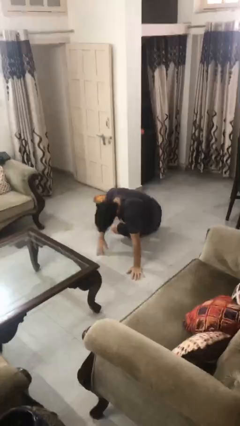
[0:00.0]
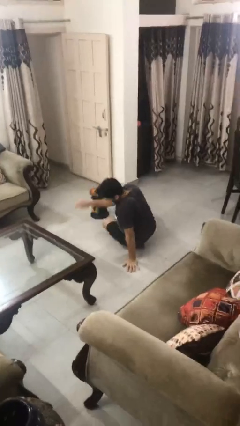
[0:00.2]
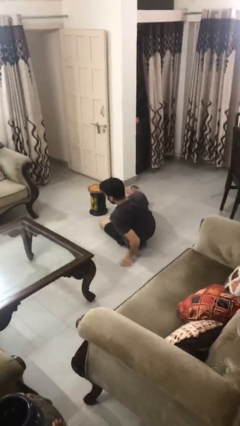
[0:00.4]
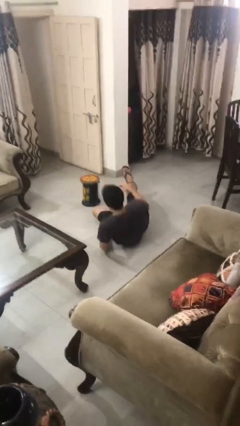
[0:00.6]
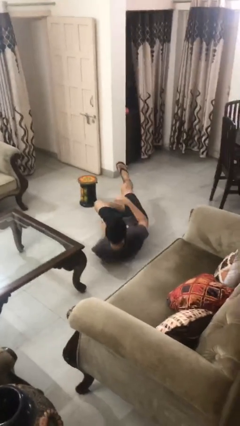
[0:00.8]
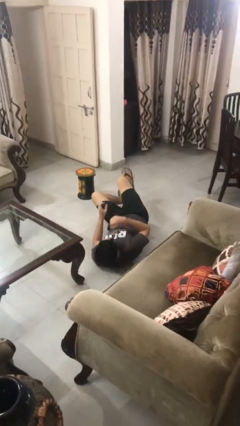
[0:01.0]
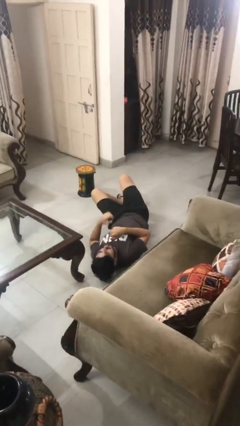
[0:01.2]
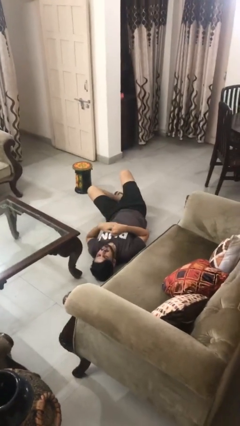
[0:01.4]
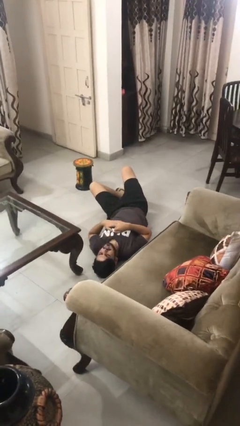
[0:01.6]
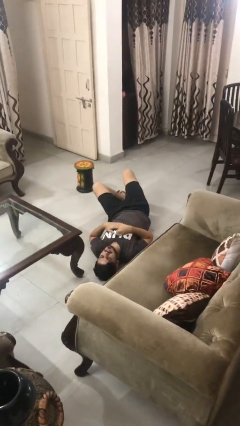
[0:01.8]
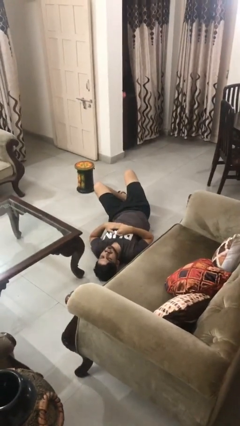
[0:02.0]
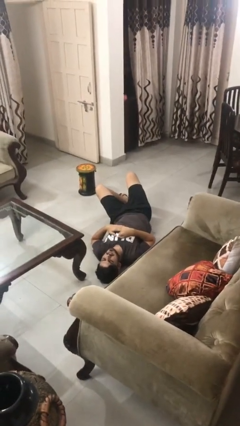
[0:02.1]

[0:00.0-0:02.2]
person lies down on floor

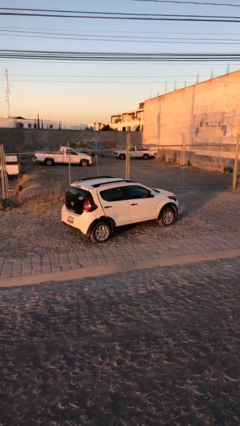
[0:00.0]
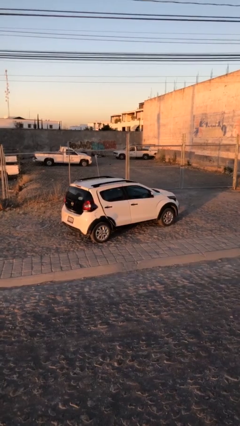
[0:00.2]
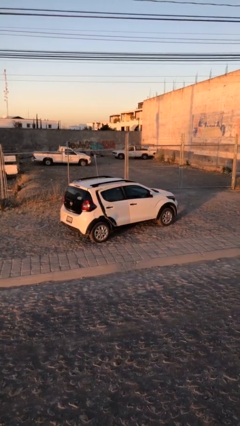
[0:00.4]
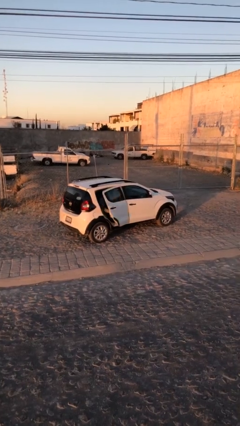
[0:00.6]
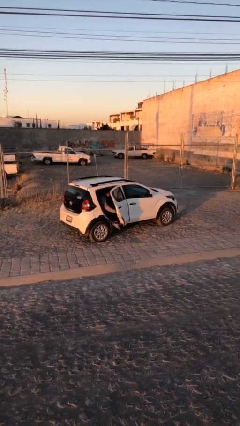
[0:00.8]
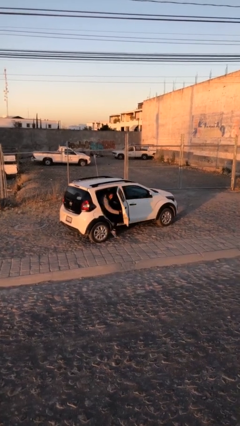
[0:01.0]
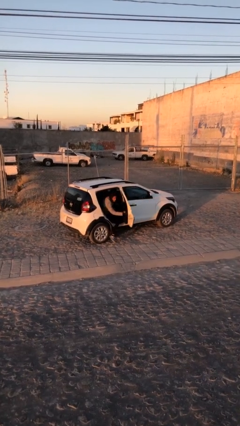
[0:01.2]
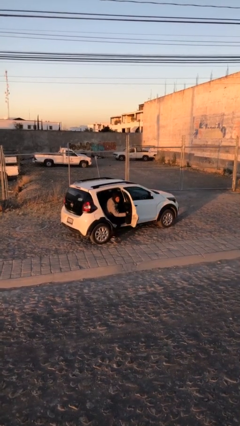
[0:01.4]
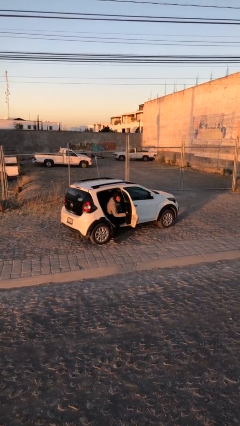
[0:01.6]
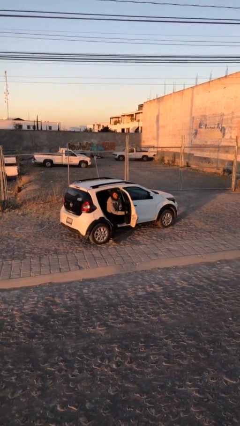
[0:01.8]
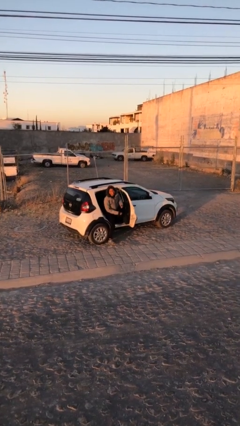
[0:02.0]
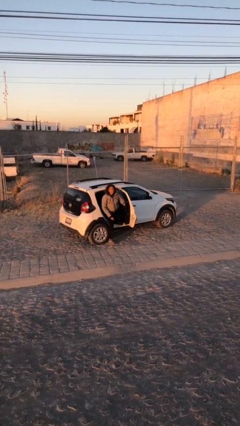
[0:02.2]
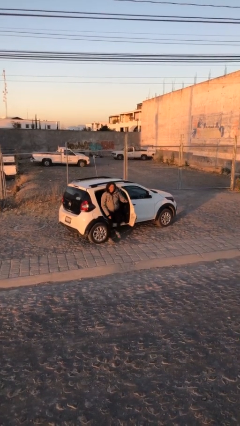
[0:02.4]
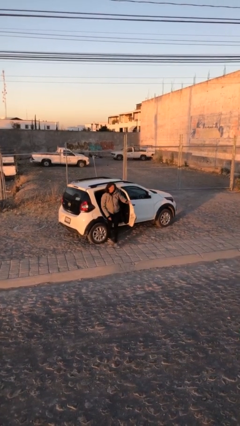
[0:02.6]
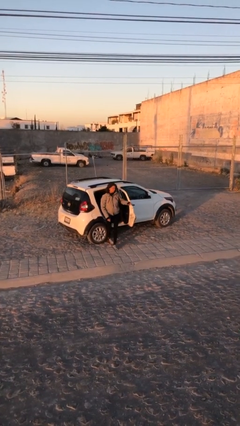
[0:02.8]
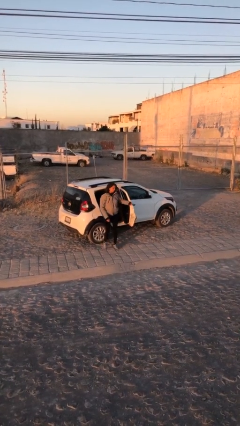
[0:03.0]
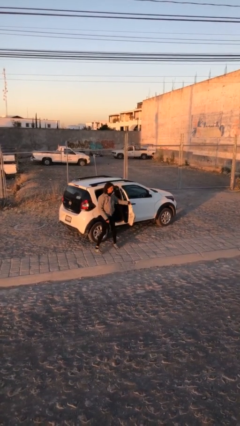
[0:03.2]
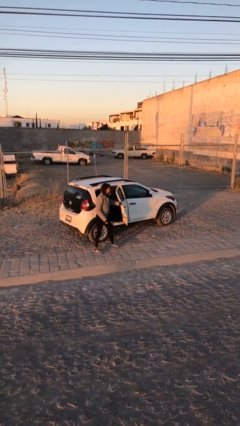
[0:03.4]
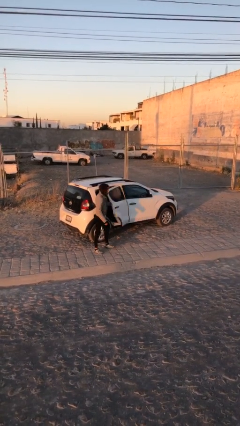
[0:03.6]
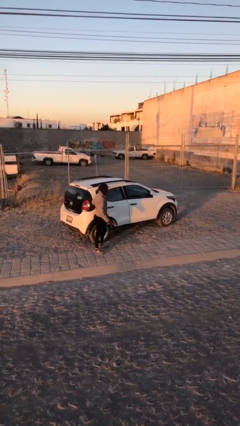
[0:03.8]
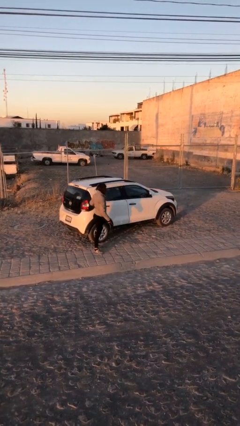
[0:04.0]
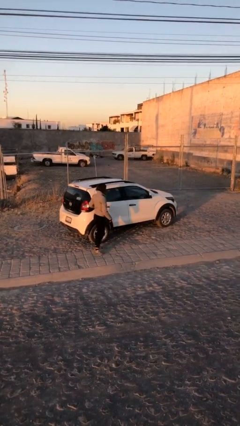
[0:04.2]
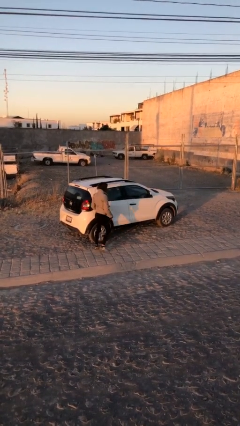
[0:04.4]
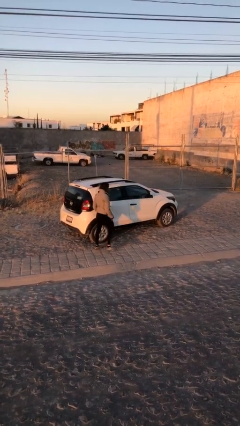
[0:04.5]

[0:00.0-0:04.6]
car drops off person

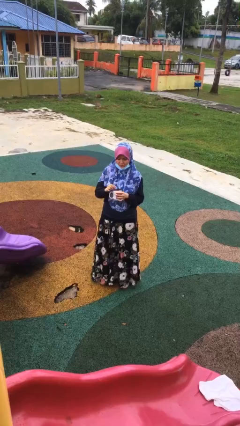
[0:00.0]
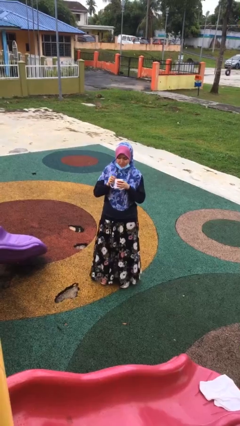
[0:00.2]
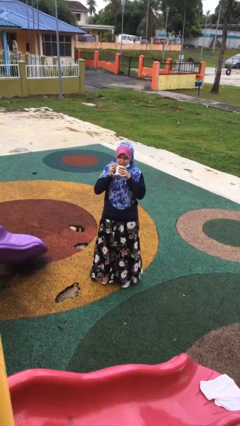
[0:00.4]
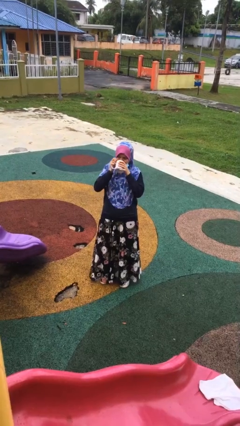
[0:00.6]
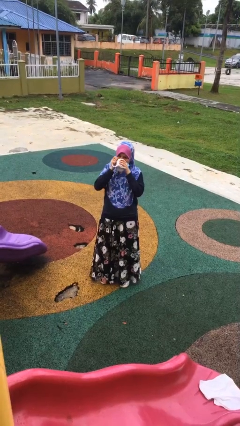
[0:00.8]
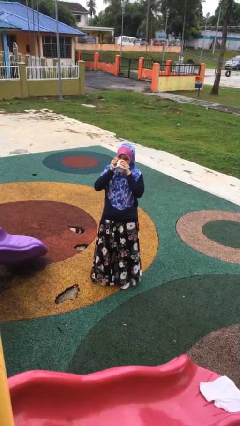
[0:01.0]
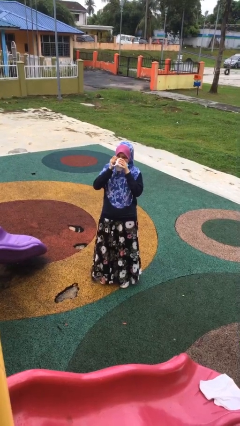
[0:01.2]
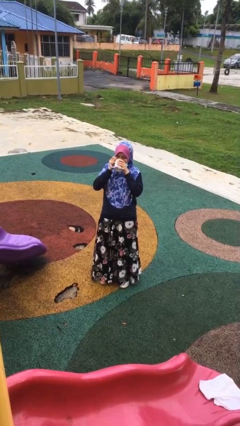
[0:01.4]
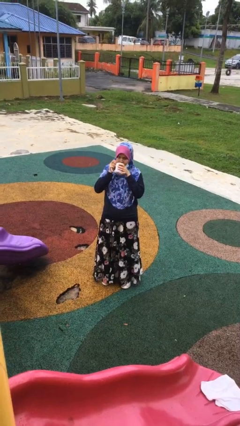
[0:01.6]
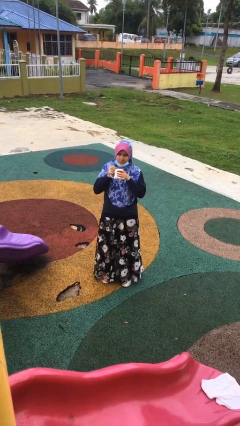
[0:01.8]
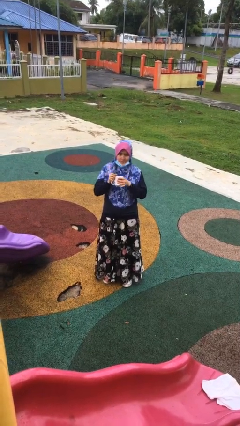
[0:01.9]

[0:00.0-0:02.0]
person drinks from mug

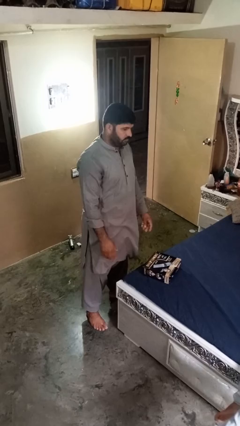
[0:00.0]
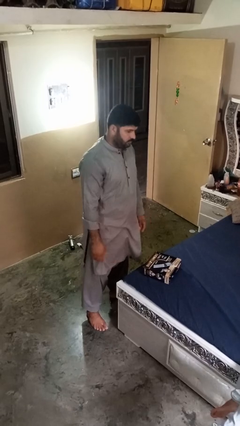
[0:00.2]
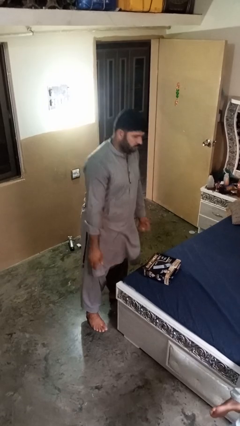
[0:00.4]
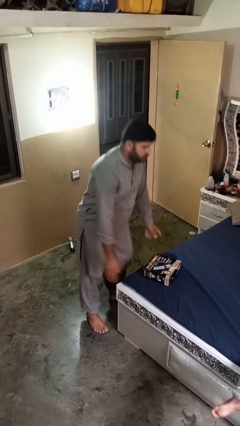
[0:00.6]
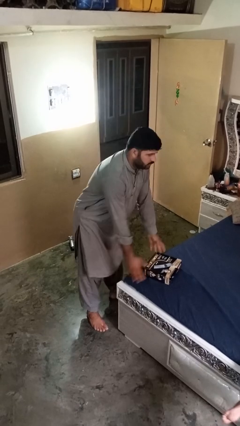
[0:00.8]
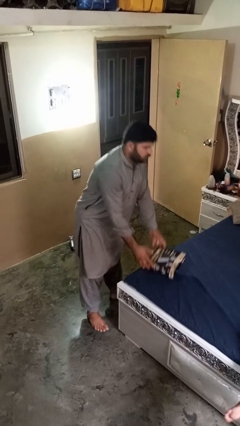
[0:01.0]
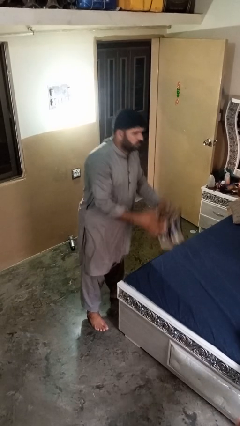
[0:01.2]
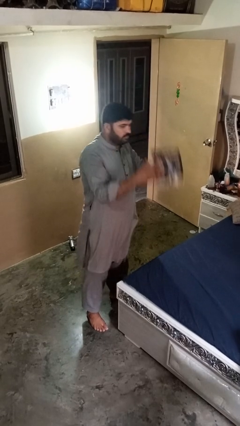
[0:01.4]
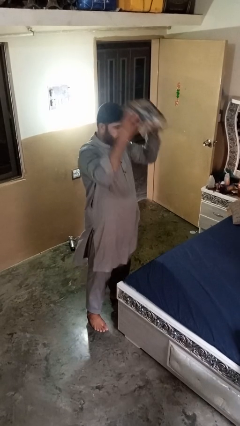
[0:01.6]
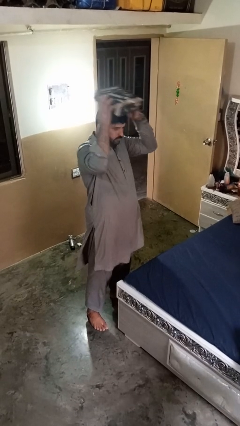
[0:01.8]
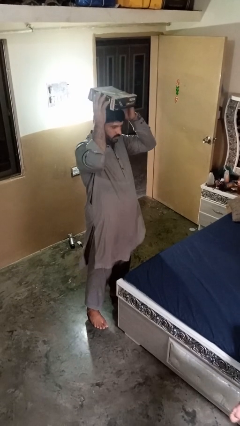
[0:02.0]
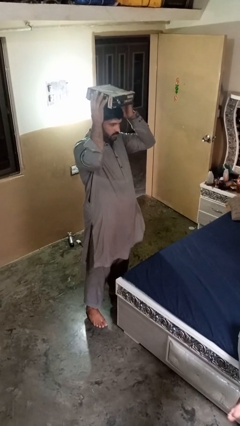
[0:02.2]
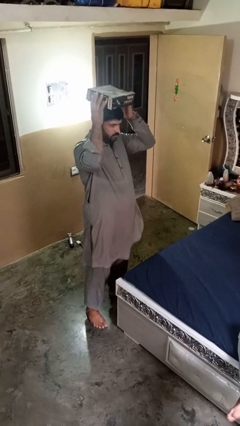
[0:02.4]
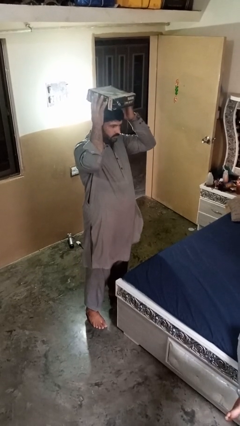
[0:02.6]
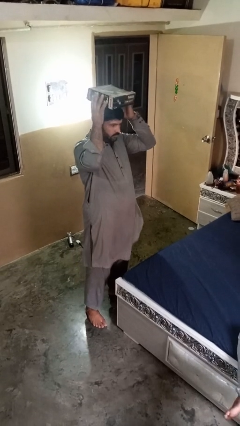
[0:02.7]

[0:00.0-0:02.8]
person holds object above head

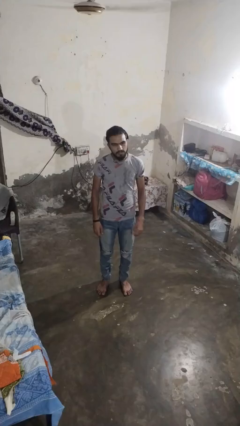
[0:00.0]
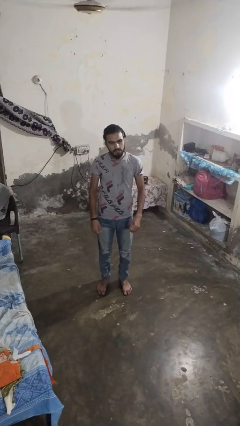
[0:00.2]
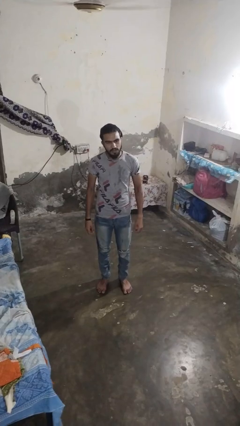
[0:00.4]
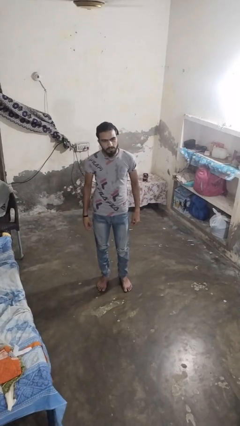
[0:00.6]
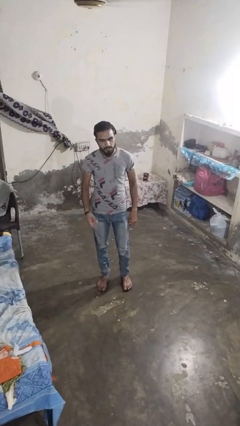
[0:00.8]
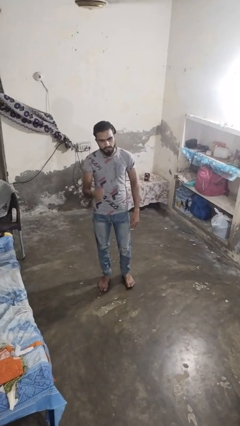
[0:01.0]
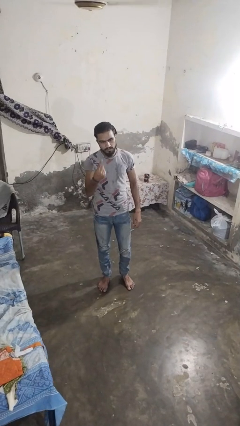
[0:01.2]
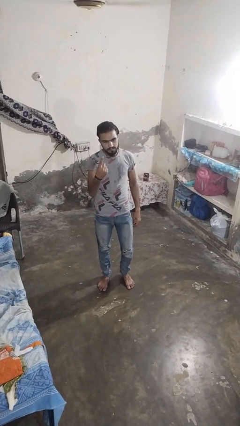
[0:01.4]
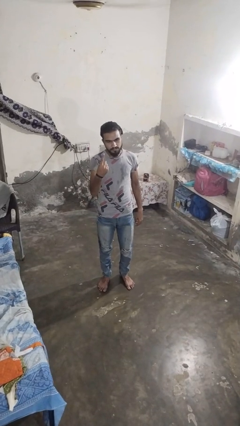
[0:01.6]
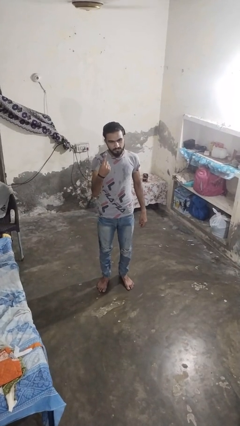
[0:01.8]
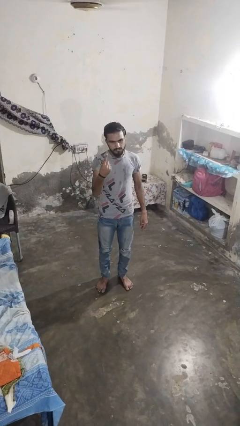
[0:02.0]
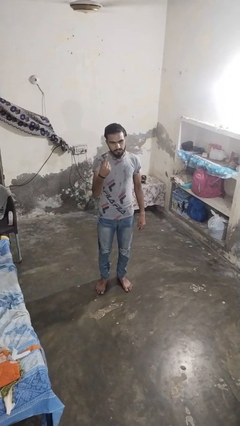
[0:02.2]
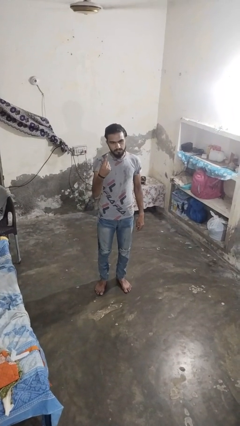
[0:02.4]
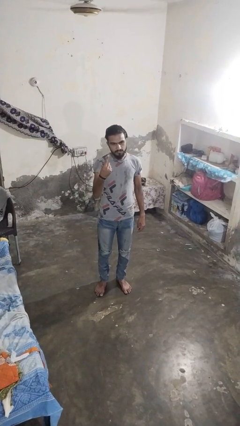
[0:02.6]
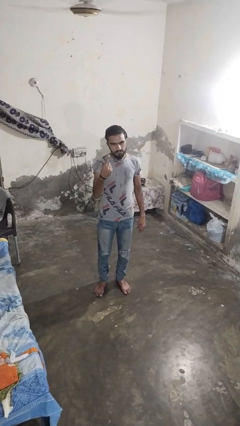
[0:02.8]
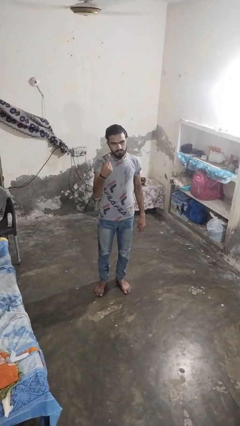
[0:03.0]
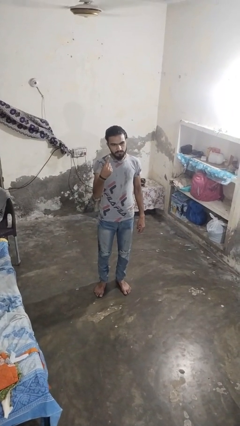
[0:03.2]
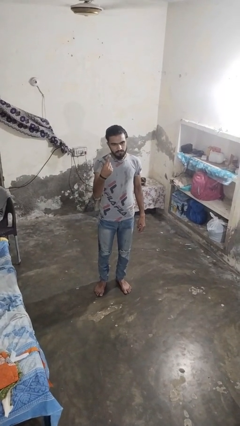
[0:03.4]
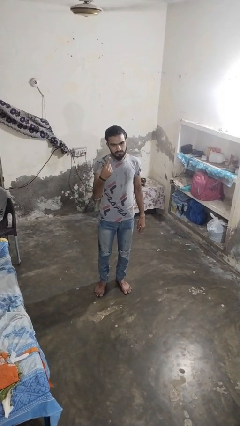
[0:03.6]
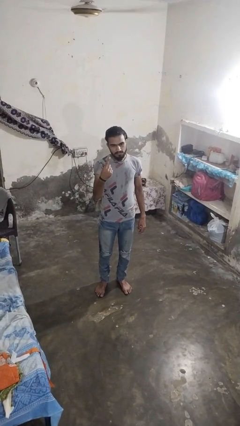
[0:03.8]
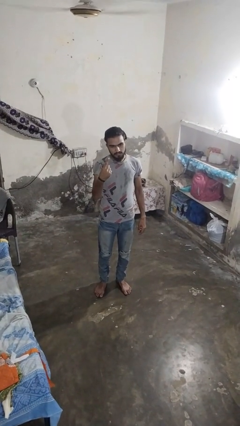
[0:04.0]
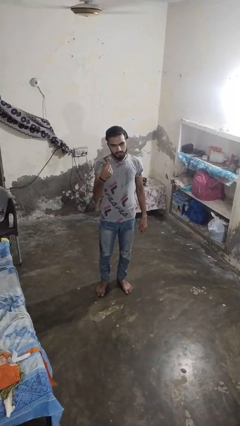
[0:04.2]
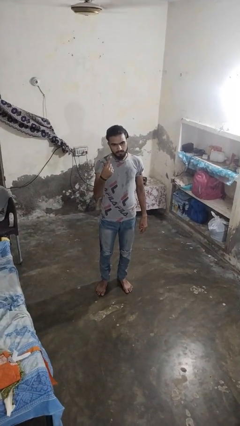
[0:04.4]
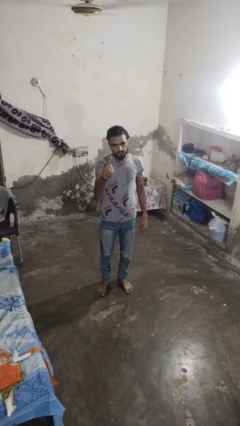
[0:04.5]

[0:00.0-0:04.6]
person gestures number one

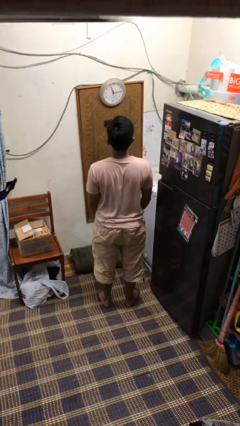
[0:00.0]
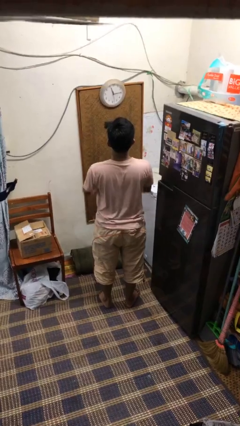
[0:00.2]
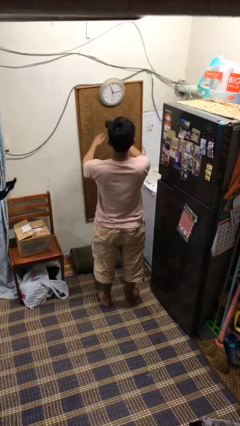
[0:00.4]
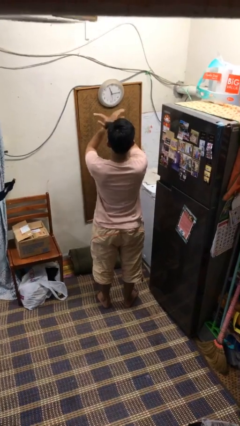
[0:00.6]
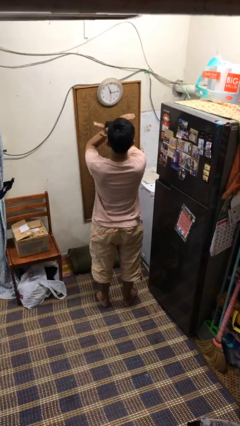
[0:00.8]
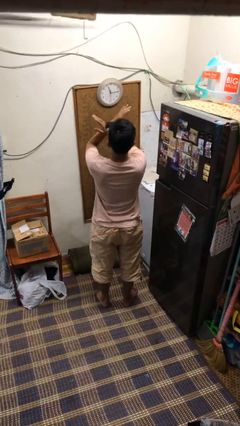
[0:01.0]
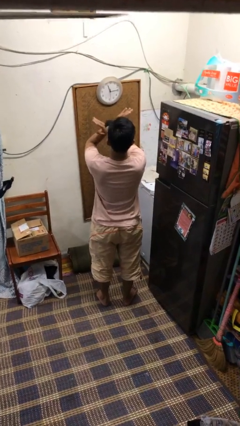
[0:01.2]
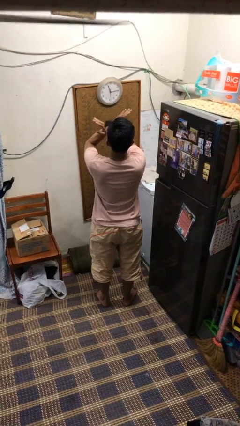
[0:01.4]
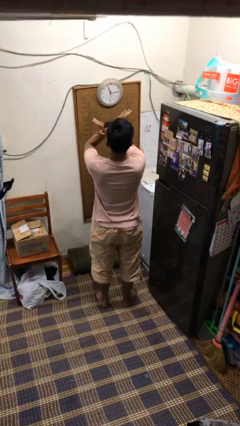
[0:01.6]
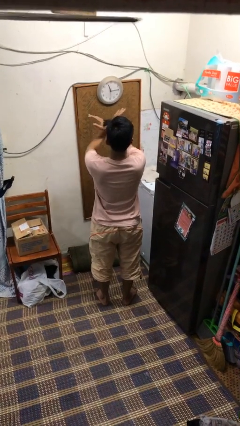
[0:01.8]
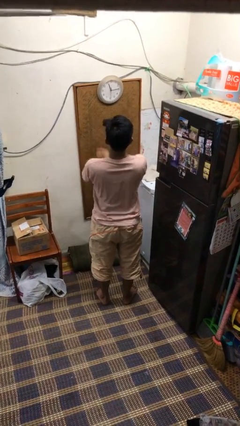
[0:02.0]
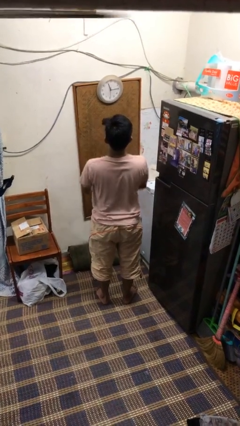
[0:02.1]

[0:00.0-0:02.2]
person gestures arms x
